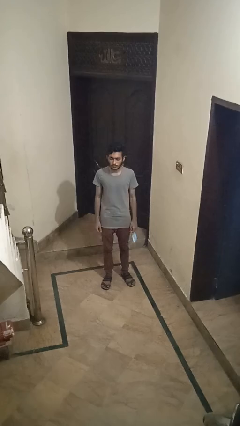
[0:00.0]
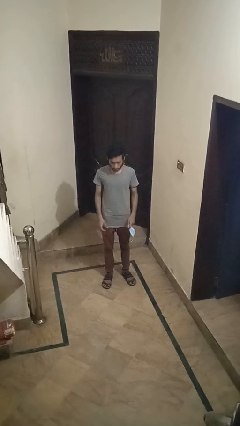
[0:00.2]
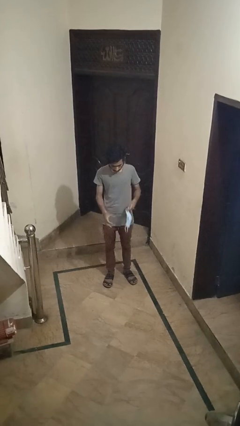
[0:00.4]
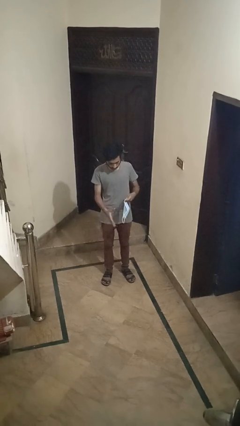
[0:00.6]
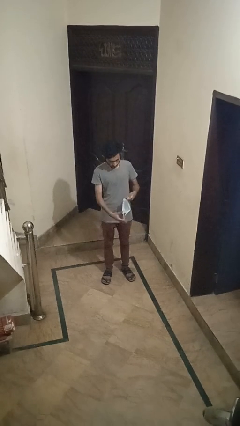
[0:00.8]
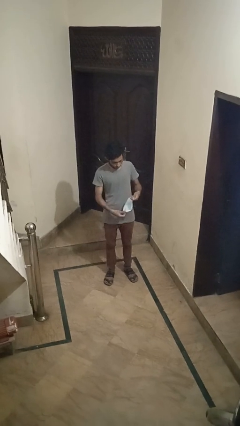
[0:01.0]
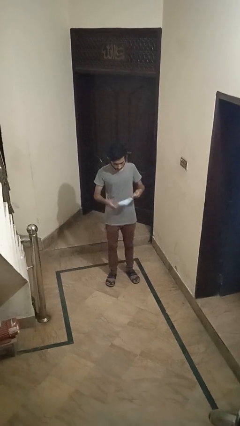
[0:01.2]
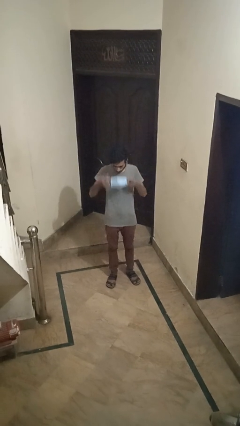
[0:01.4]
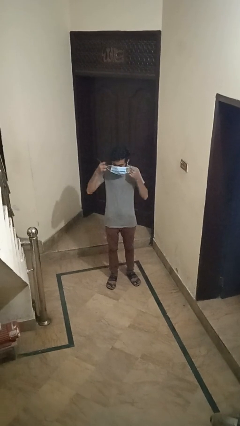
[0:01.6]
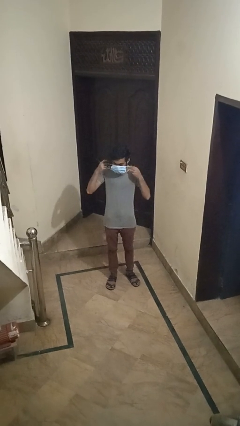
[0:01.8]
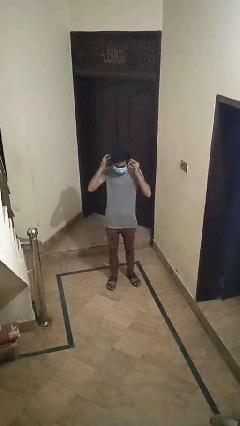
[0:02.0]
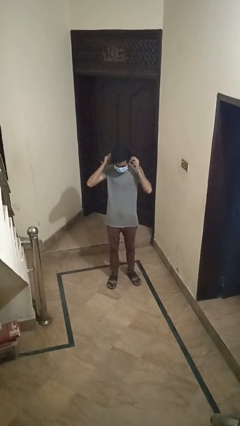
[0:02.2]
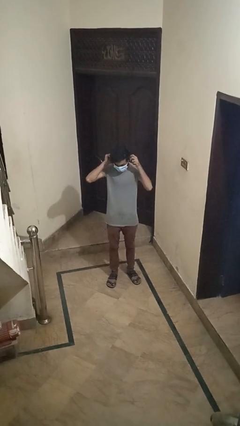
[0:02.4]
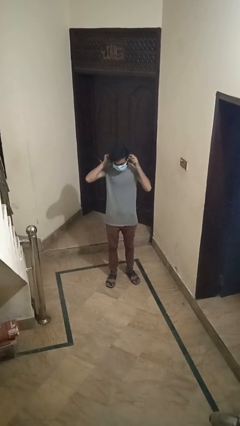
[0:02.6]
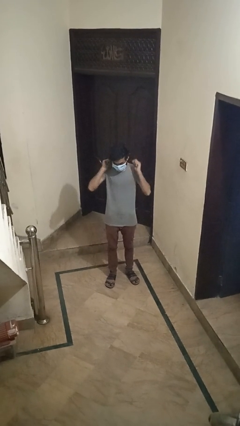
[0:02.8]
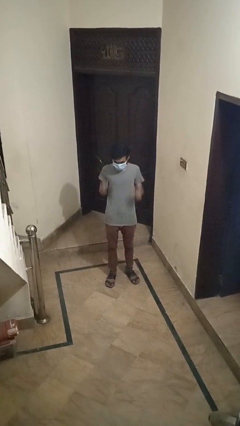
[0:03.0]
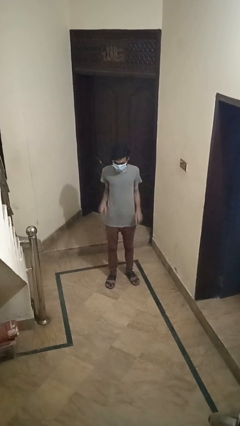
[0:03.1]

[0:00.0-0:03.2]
person puts on facemask

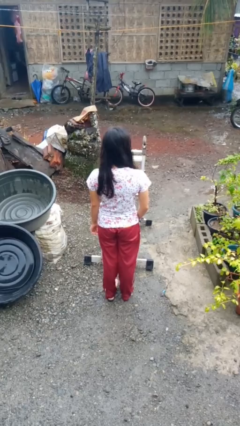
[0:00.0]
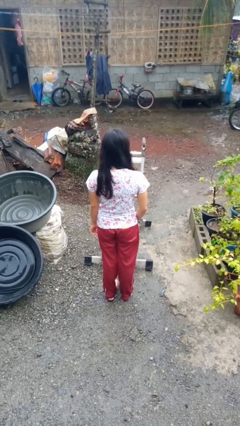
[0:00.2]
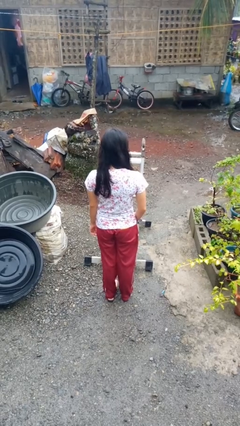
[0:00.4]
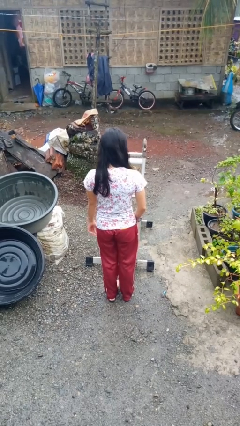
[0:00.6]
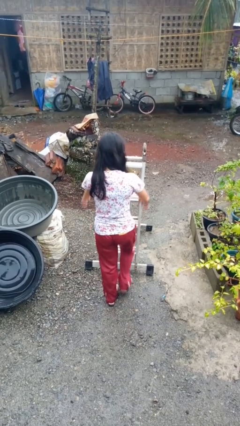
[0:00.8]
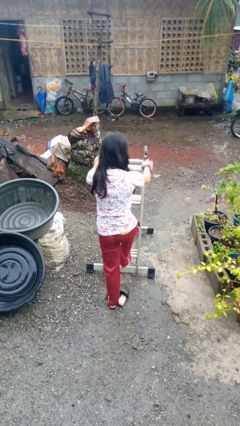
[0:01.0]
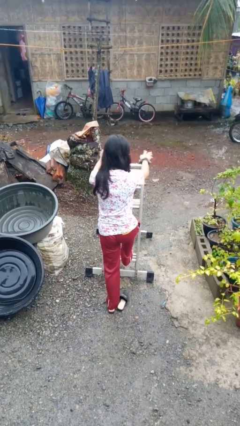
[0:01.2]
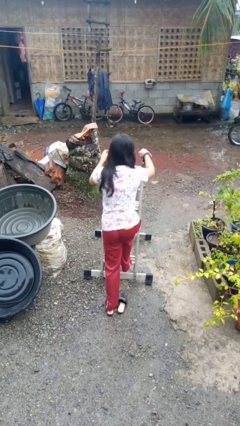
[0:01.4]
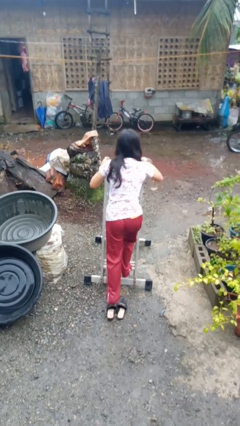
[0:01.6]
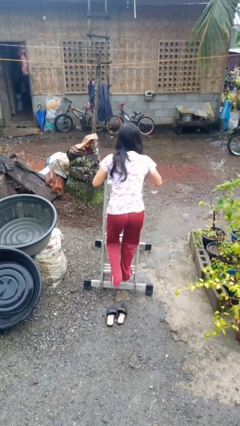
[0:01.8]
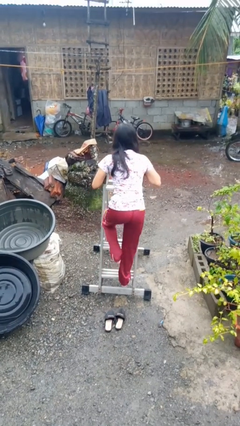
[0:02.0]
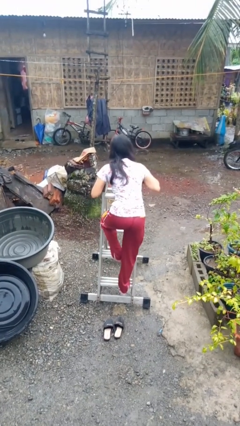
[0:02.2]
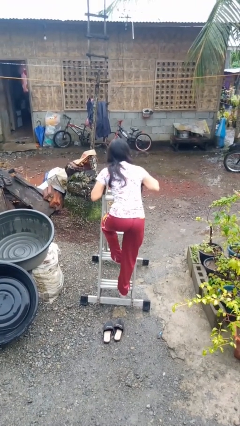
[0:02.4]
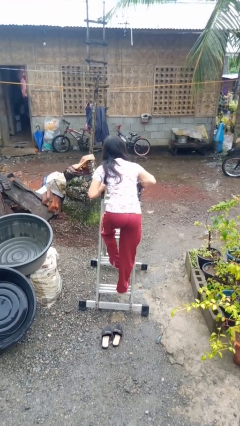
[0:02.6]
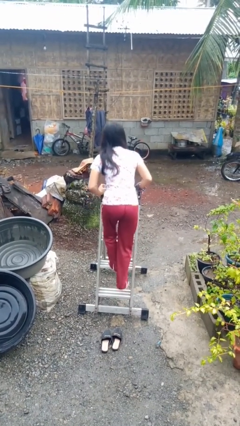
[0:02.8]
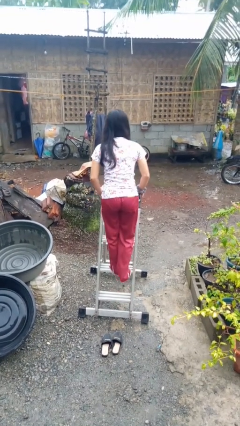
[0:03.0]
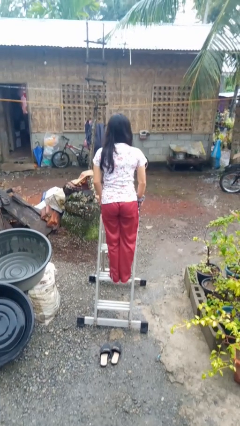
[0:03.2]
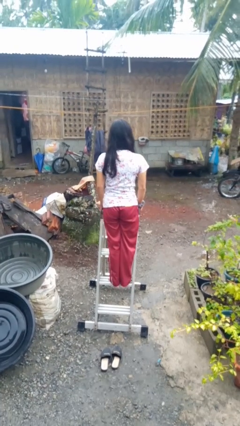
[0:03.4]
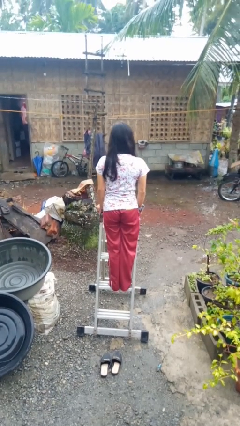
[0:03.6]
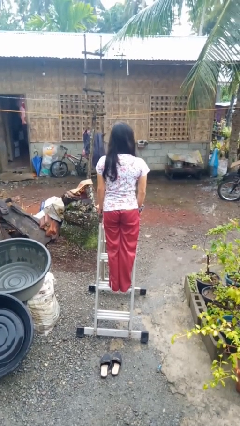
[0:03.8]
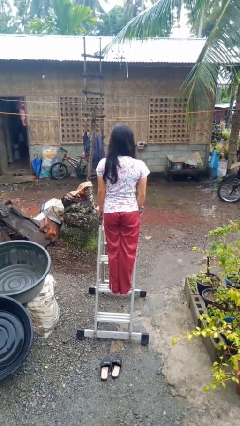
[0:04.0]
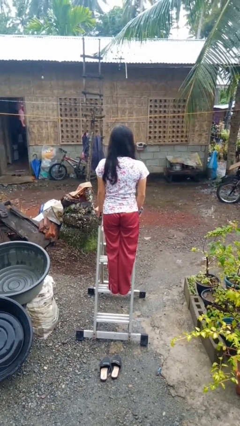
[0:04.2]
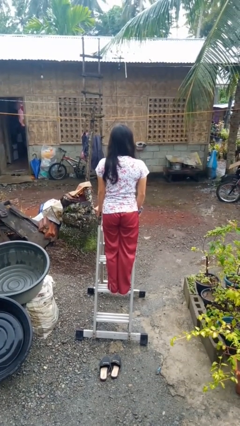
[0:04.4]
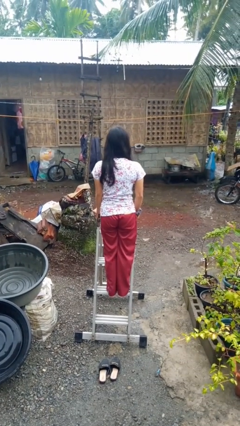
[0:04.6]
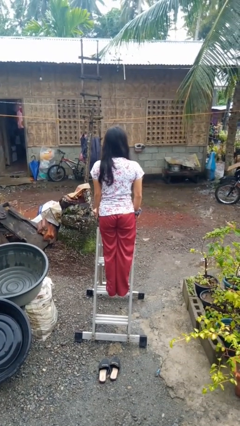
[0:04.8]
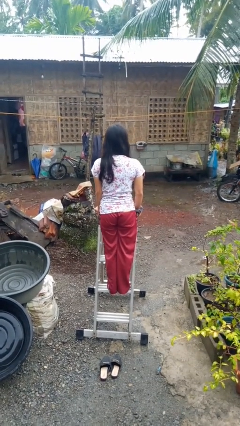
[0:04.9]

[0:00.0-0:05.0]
person climbs up ladder

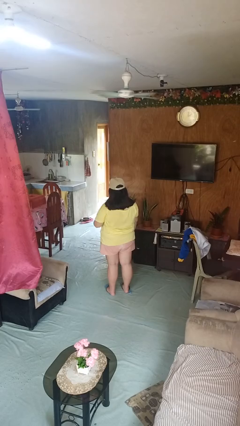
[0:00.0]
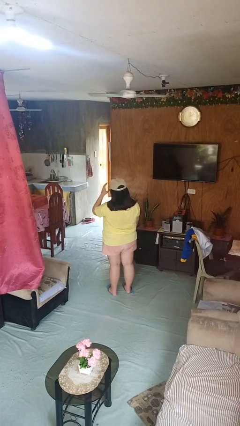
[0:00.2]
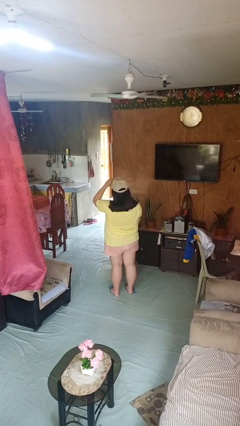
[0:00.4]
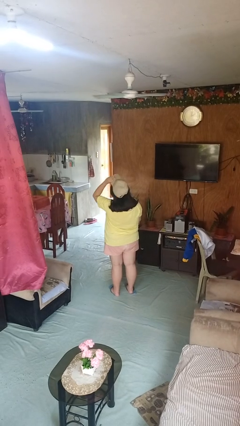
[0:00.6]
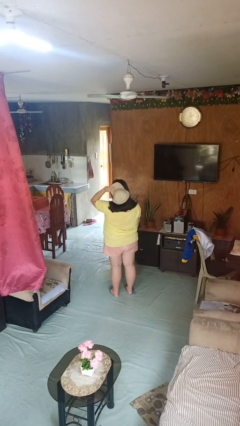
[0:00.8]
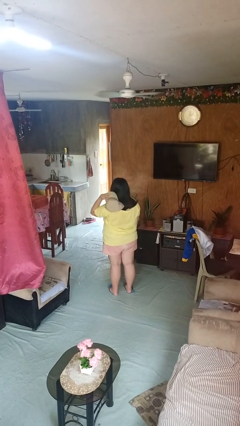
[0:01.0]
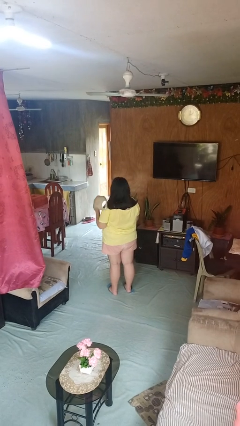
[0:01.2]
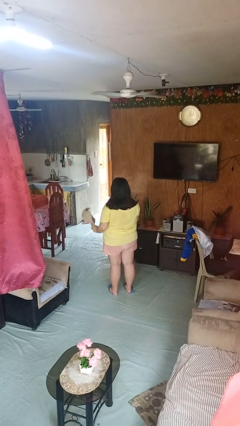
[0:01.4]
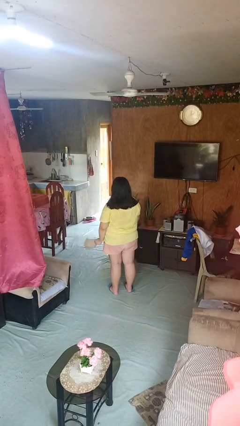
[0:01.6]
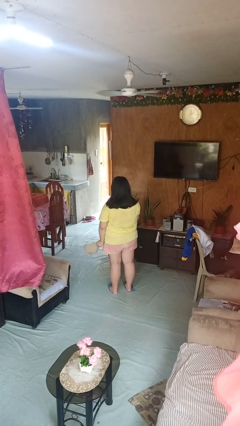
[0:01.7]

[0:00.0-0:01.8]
person takes off hat

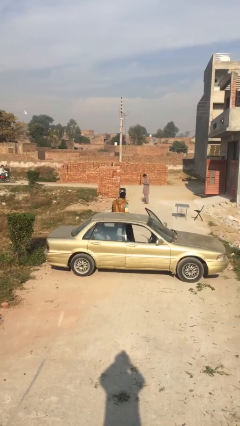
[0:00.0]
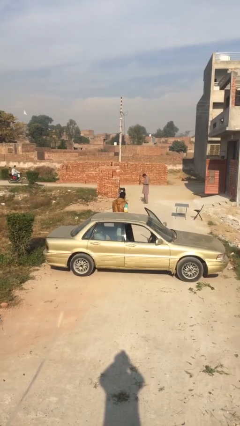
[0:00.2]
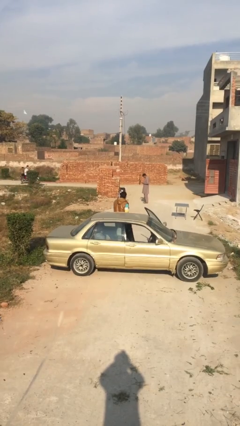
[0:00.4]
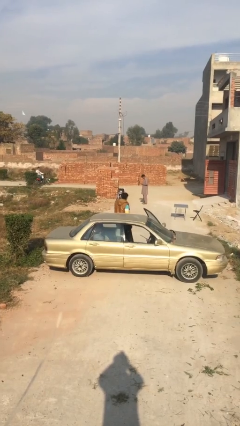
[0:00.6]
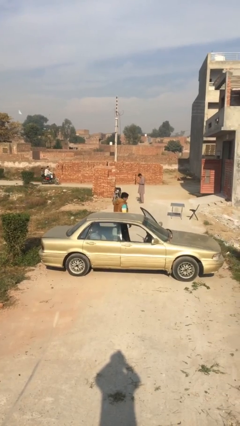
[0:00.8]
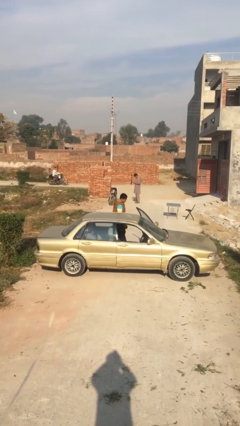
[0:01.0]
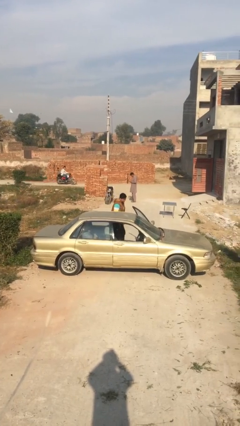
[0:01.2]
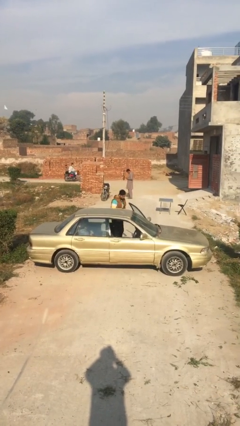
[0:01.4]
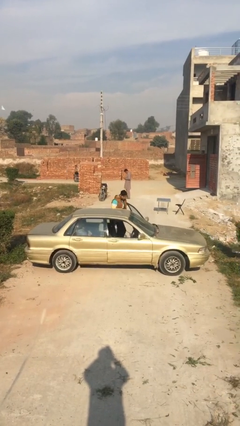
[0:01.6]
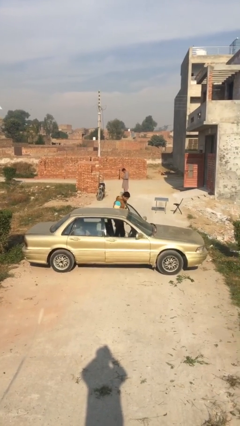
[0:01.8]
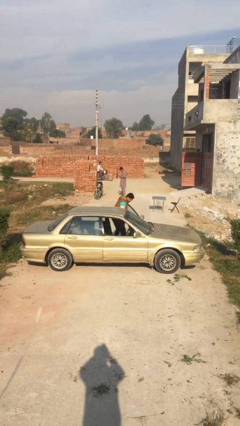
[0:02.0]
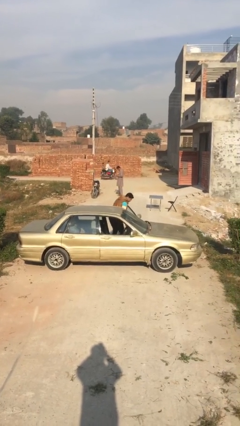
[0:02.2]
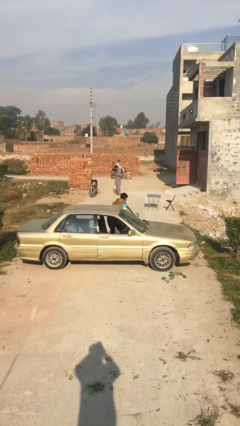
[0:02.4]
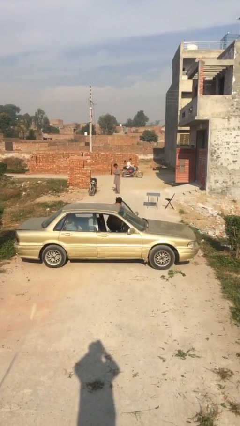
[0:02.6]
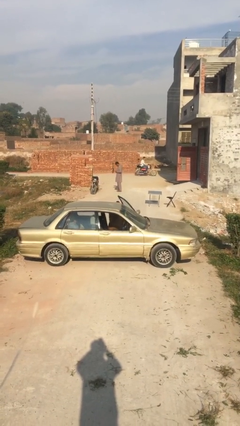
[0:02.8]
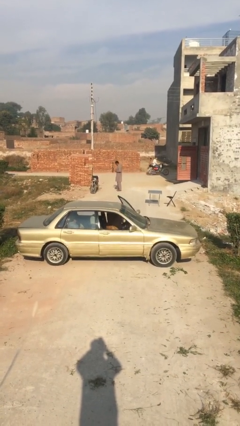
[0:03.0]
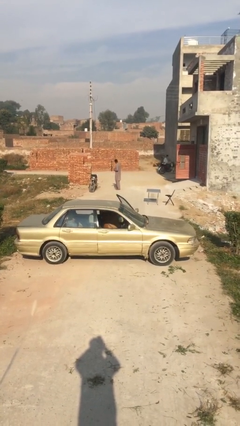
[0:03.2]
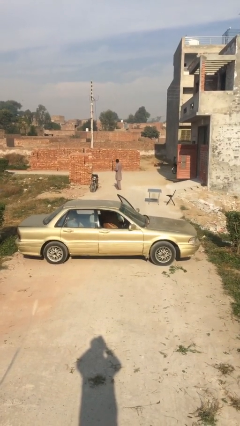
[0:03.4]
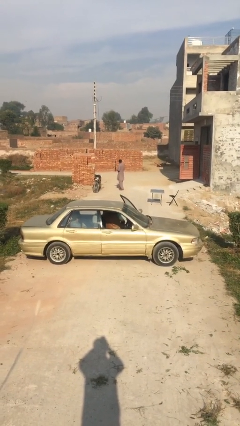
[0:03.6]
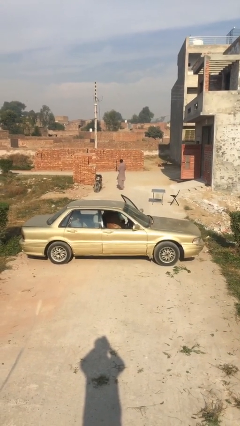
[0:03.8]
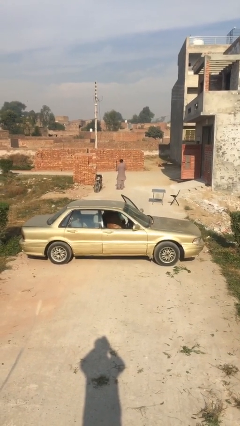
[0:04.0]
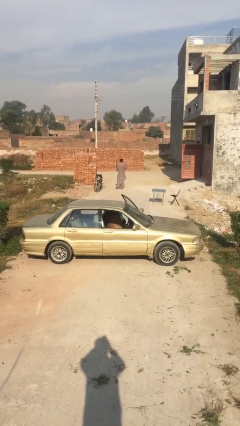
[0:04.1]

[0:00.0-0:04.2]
person enters car

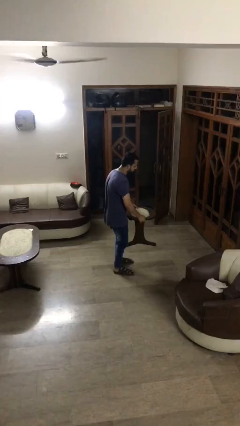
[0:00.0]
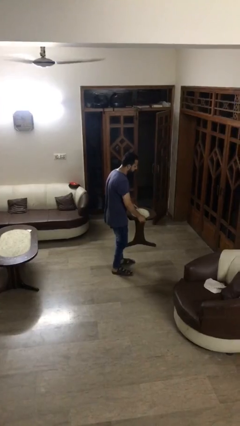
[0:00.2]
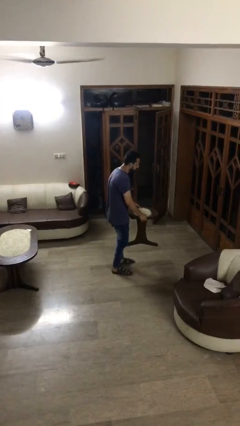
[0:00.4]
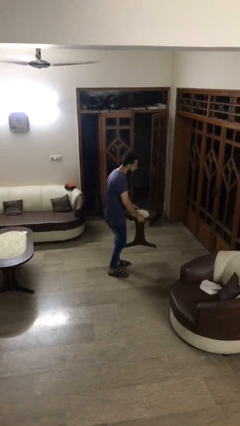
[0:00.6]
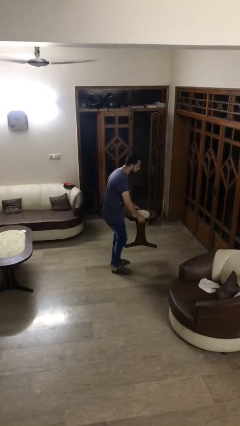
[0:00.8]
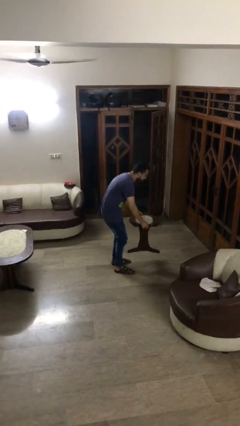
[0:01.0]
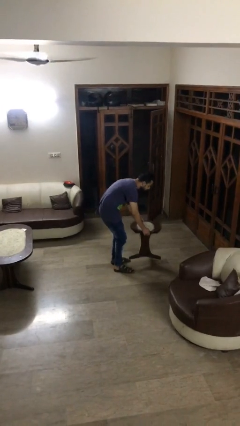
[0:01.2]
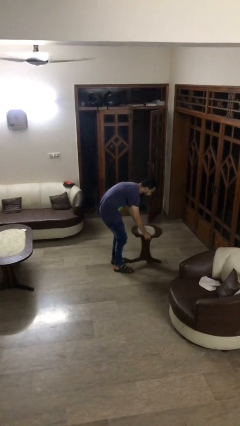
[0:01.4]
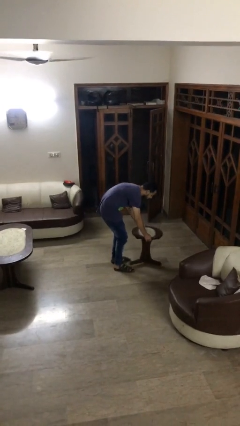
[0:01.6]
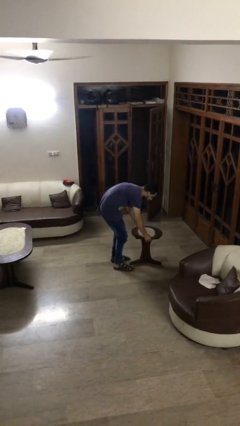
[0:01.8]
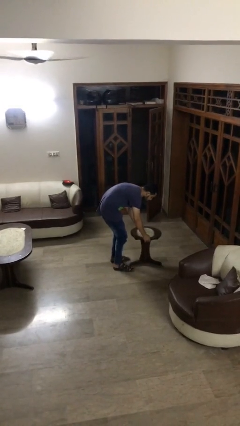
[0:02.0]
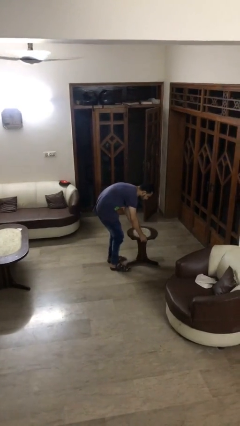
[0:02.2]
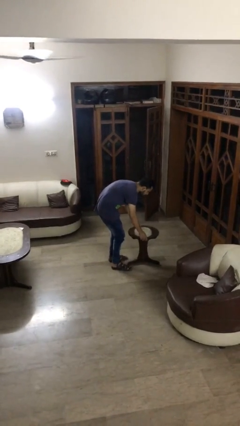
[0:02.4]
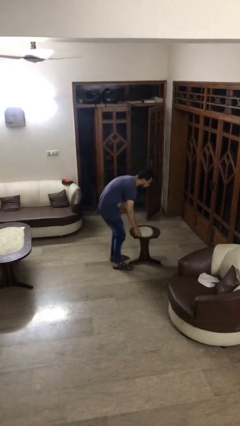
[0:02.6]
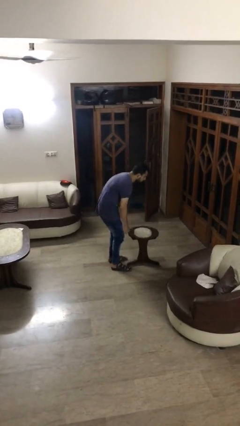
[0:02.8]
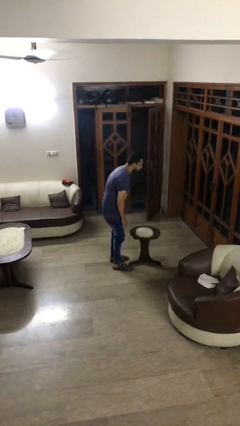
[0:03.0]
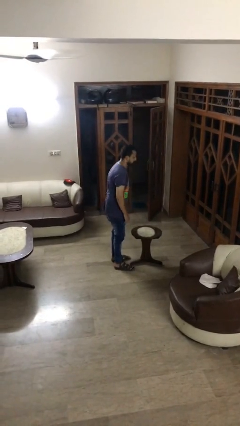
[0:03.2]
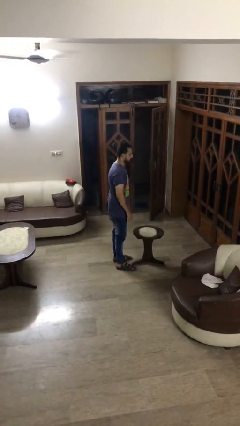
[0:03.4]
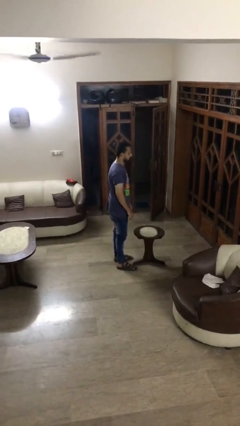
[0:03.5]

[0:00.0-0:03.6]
person puts down object on floor
